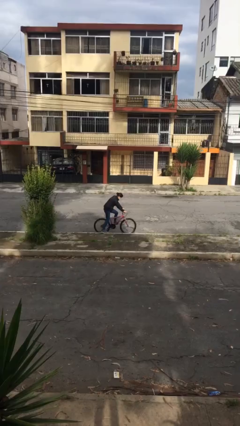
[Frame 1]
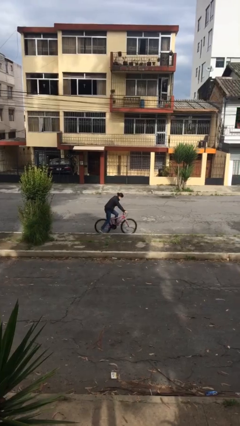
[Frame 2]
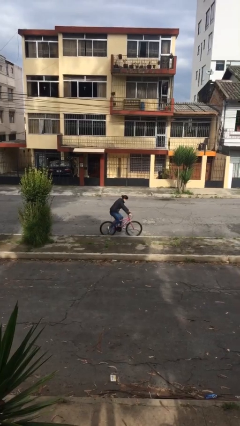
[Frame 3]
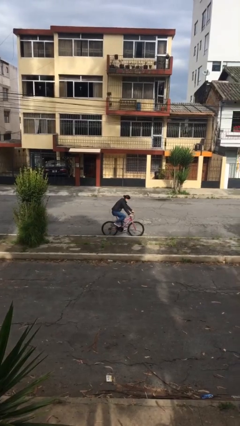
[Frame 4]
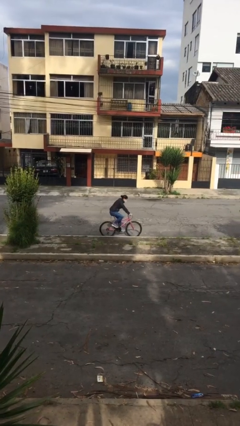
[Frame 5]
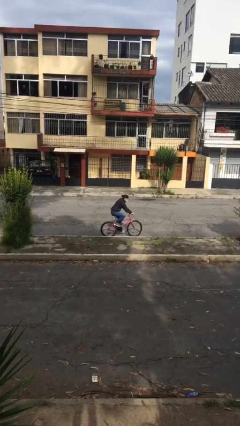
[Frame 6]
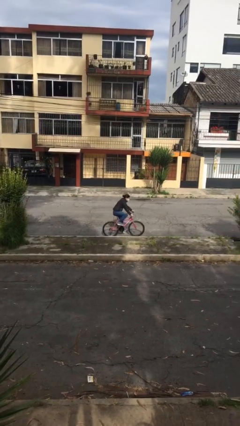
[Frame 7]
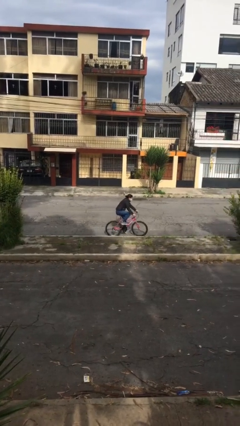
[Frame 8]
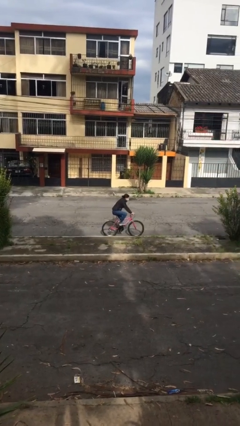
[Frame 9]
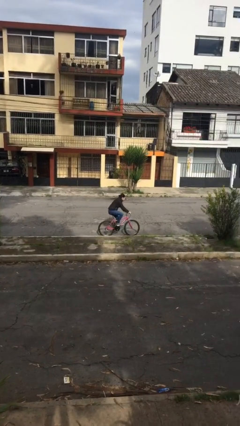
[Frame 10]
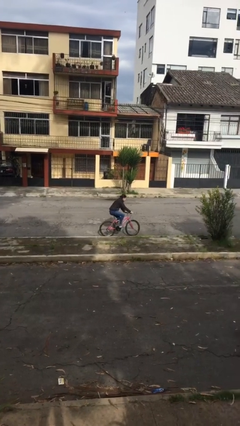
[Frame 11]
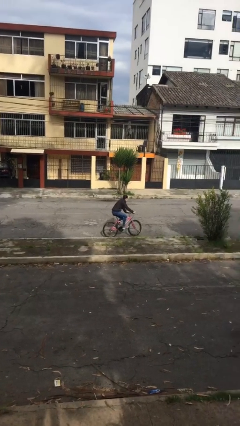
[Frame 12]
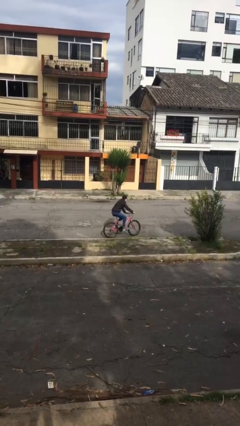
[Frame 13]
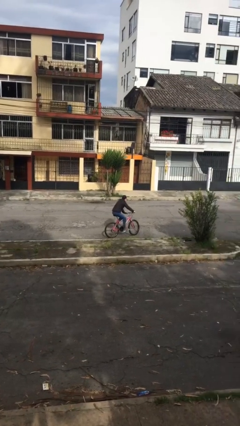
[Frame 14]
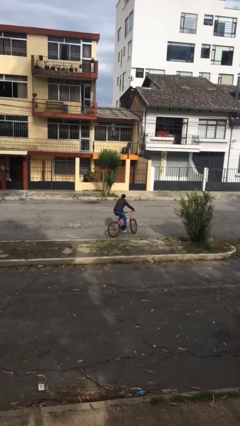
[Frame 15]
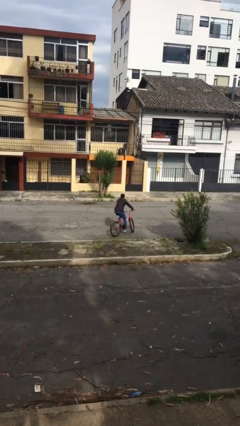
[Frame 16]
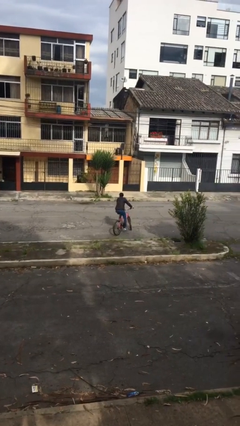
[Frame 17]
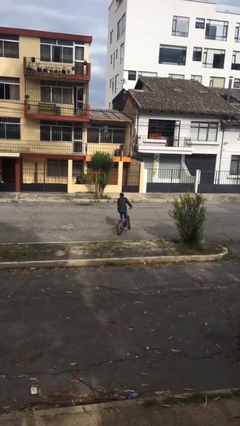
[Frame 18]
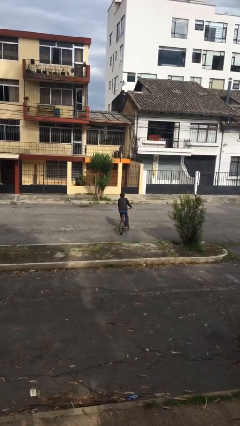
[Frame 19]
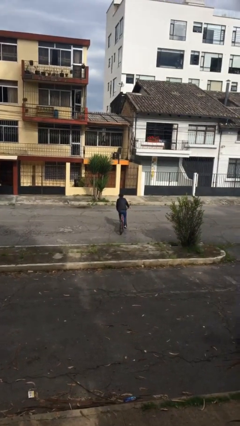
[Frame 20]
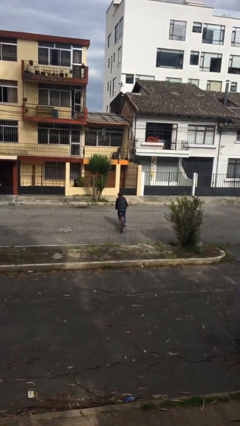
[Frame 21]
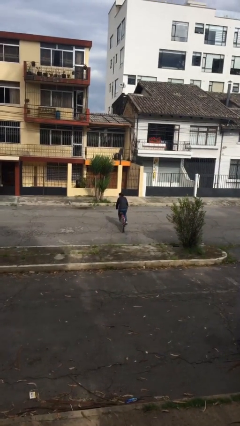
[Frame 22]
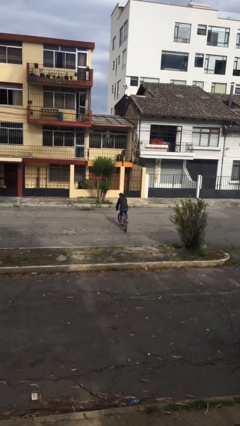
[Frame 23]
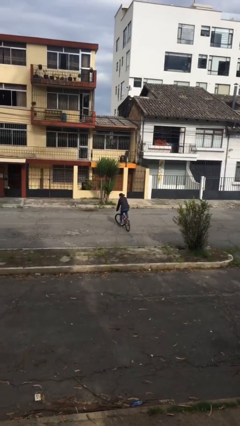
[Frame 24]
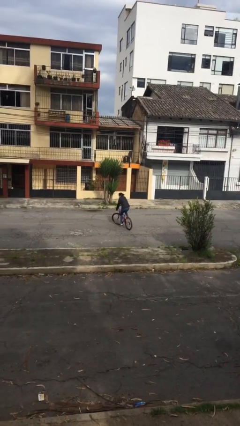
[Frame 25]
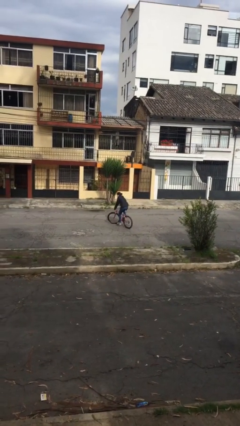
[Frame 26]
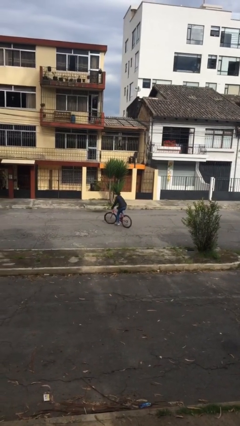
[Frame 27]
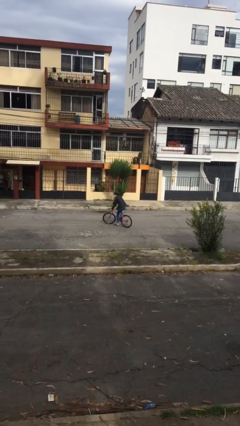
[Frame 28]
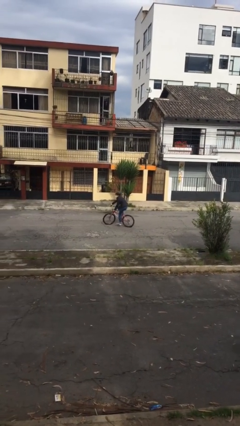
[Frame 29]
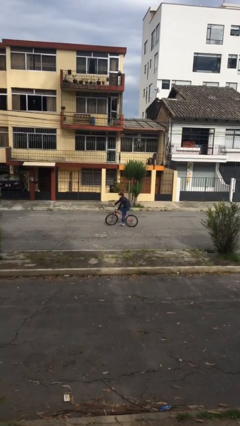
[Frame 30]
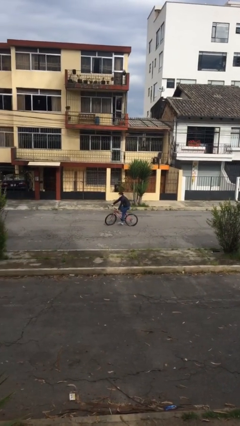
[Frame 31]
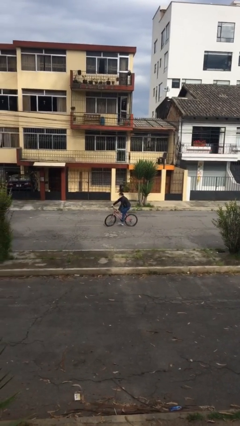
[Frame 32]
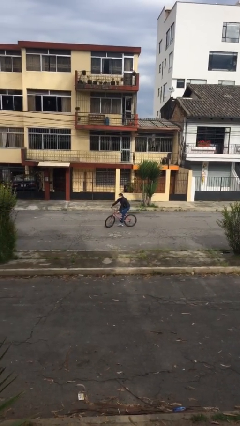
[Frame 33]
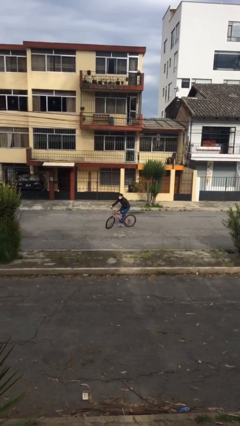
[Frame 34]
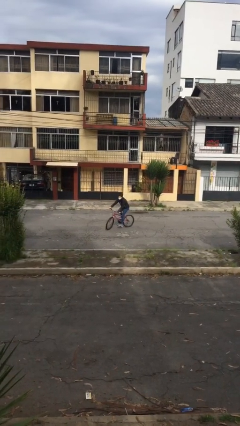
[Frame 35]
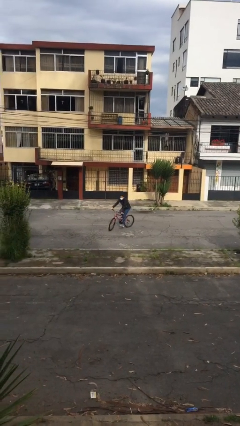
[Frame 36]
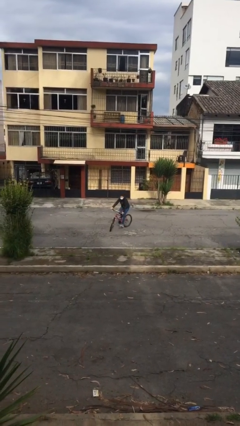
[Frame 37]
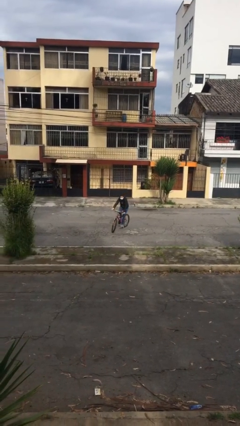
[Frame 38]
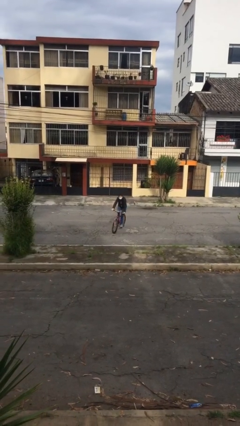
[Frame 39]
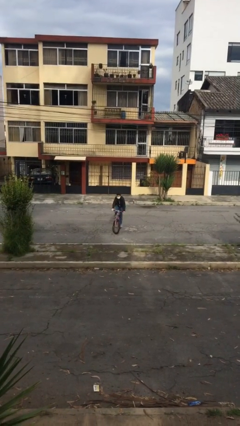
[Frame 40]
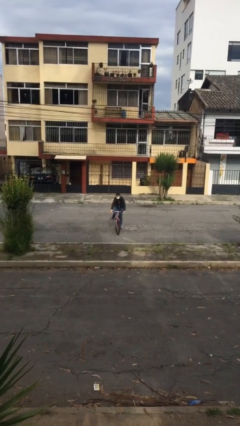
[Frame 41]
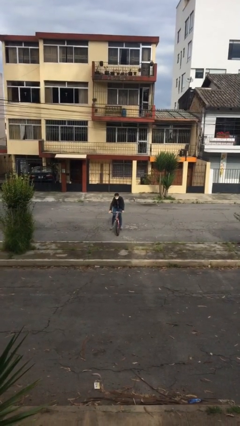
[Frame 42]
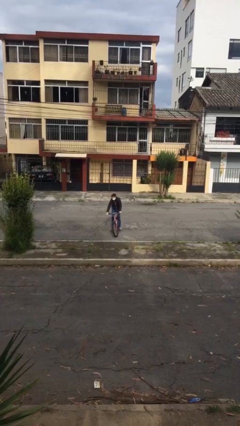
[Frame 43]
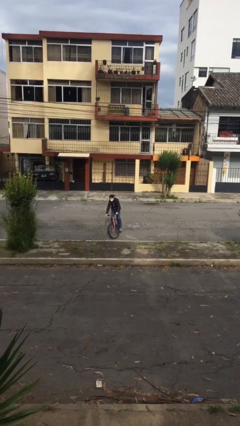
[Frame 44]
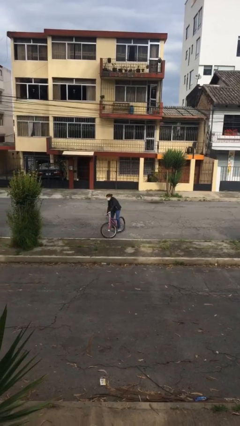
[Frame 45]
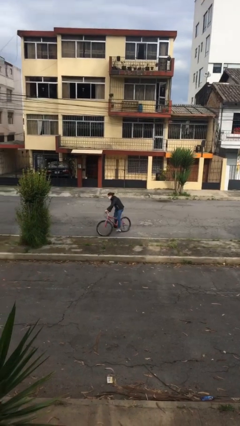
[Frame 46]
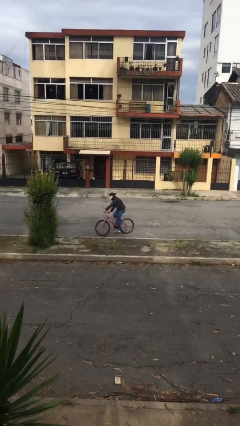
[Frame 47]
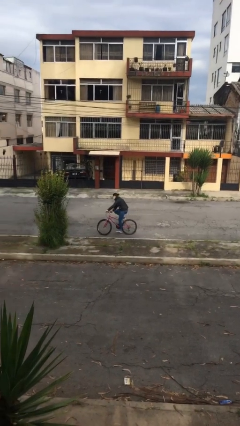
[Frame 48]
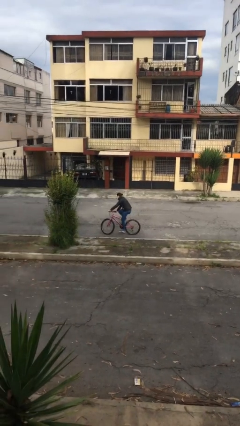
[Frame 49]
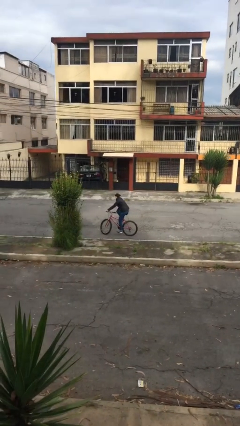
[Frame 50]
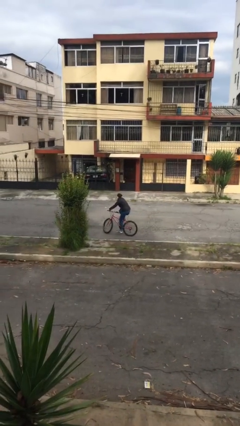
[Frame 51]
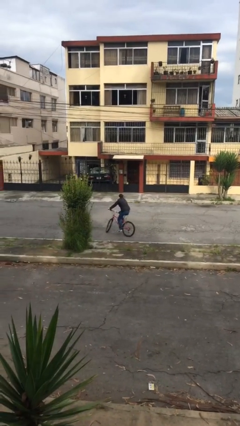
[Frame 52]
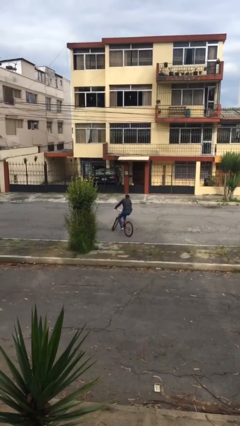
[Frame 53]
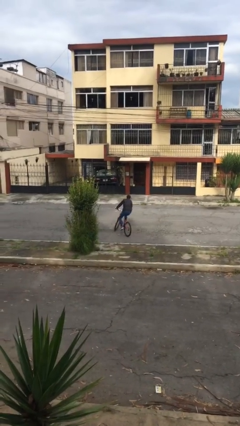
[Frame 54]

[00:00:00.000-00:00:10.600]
person rides bicycle

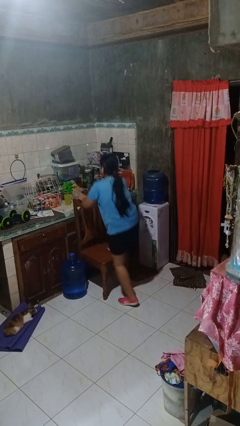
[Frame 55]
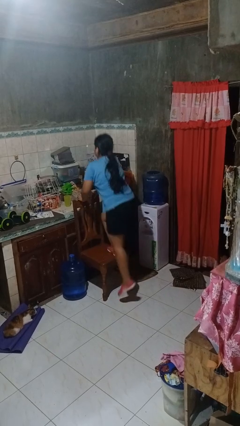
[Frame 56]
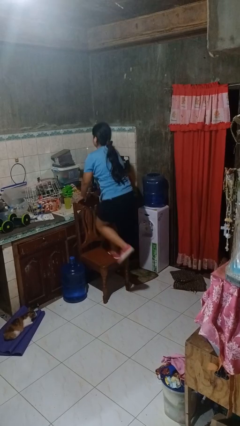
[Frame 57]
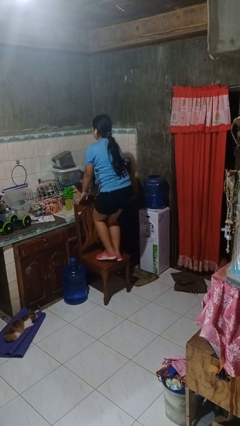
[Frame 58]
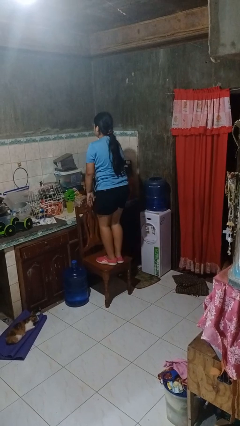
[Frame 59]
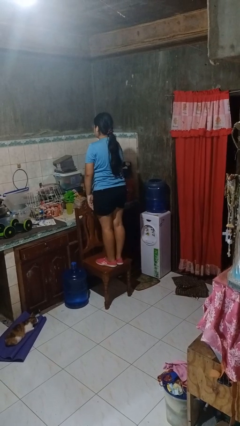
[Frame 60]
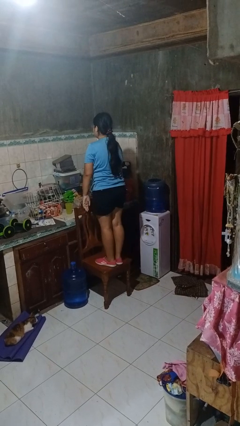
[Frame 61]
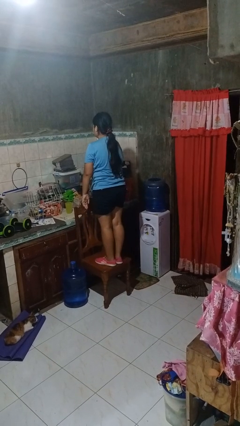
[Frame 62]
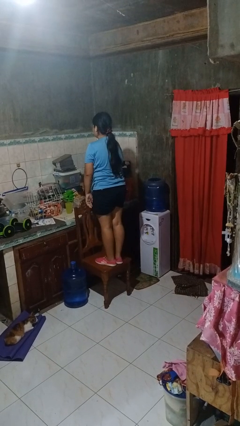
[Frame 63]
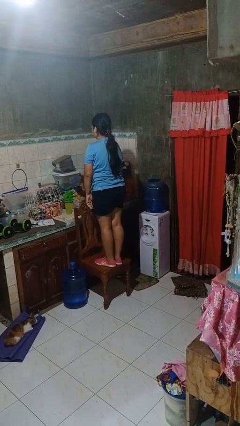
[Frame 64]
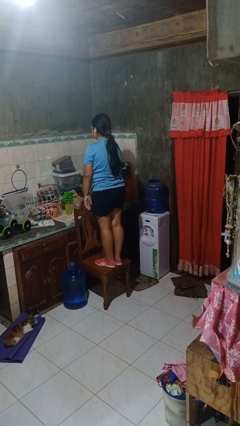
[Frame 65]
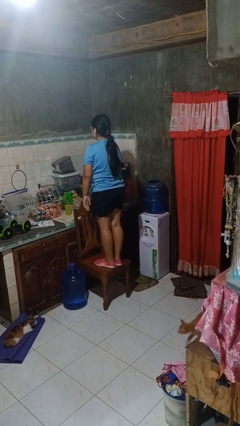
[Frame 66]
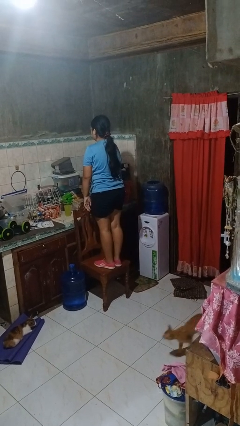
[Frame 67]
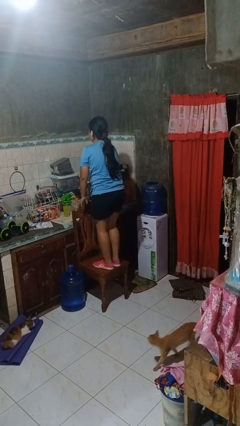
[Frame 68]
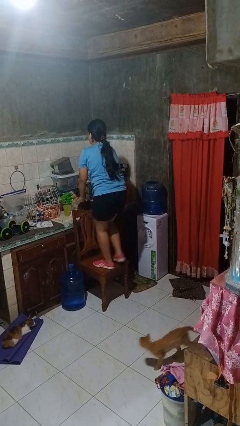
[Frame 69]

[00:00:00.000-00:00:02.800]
person climbs on chair

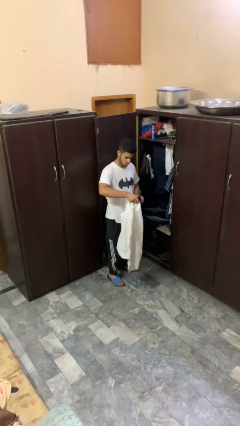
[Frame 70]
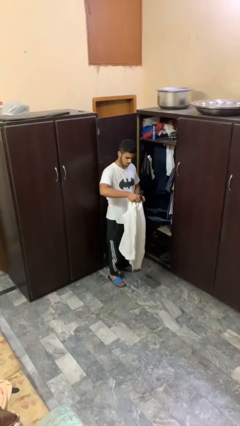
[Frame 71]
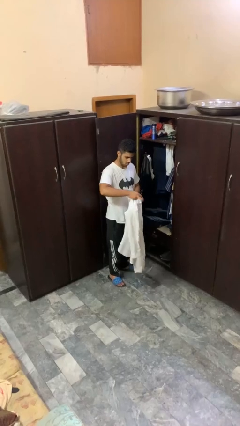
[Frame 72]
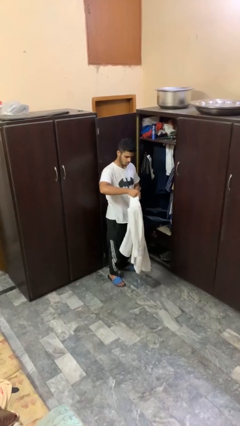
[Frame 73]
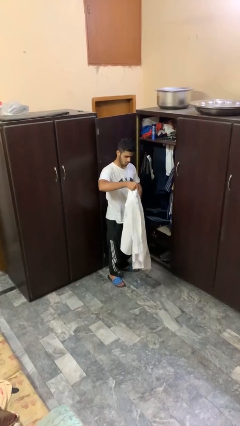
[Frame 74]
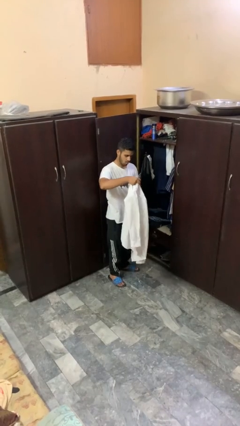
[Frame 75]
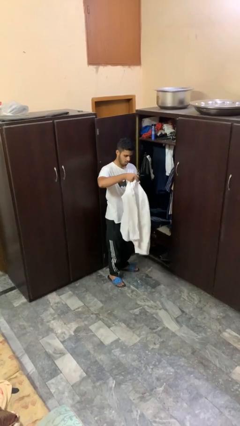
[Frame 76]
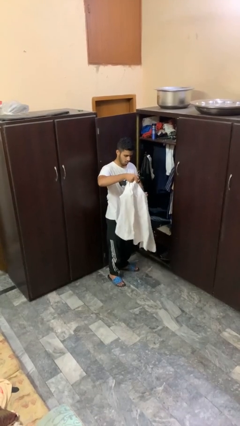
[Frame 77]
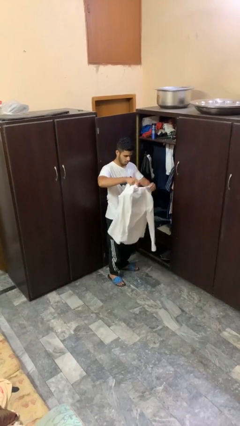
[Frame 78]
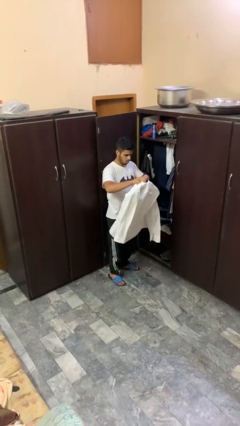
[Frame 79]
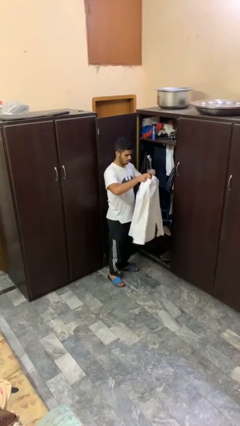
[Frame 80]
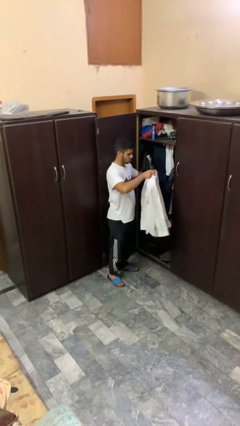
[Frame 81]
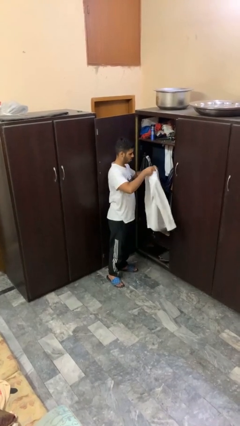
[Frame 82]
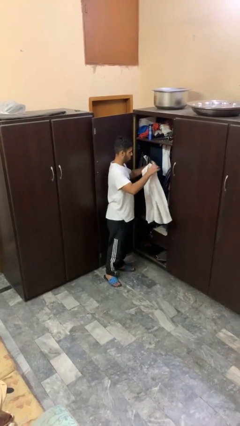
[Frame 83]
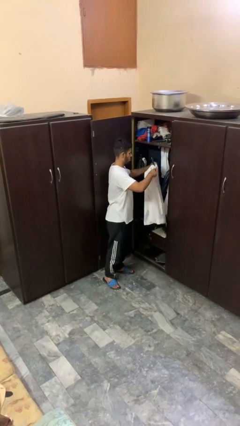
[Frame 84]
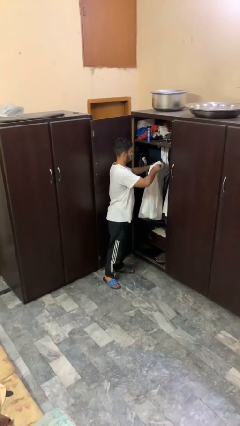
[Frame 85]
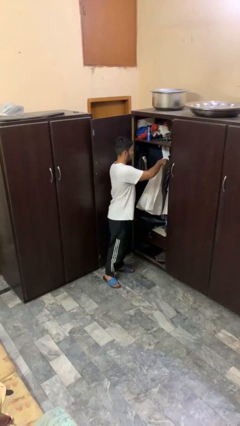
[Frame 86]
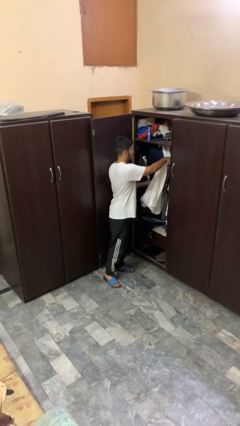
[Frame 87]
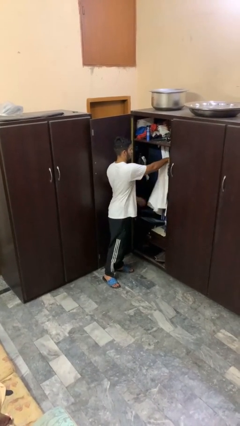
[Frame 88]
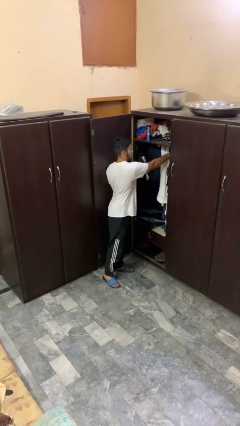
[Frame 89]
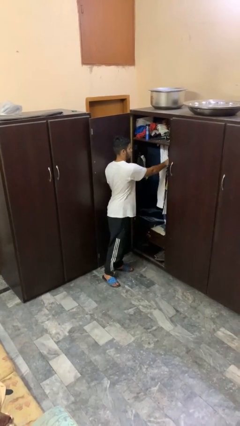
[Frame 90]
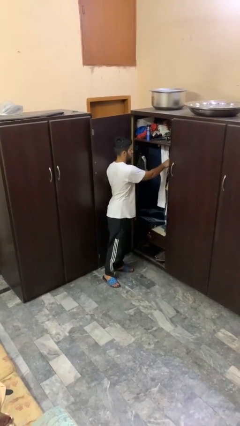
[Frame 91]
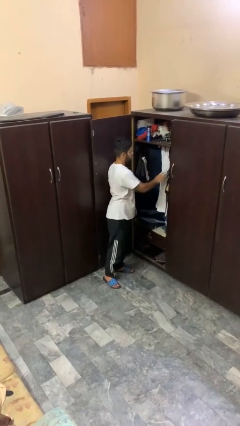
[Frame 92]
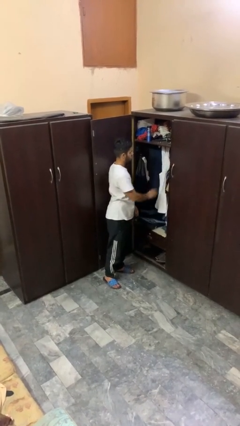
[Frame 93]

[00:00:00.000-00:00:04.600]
person puts clothes into closet
